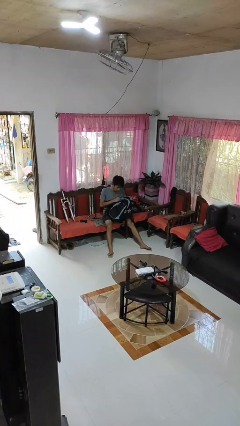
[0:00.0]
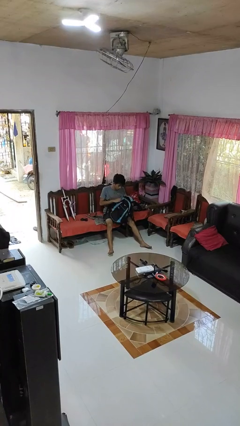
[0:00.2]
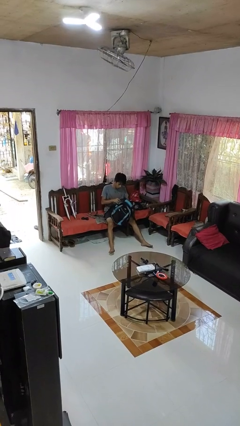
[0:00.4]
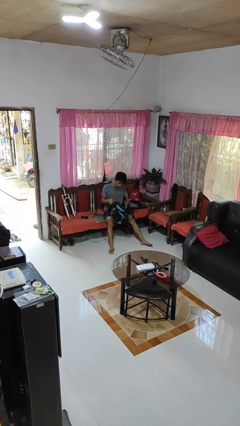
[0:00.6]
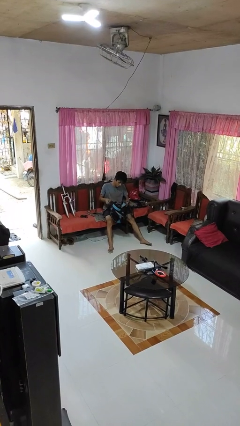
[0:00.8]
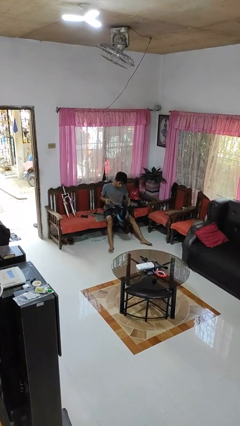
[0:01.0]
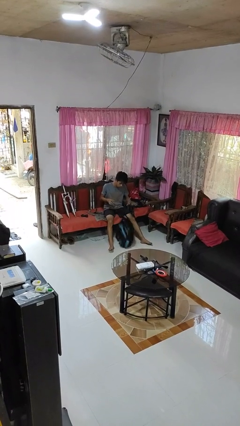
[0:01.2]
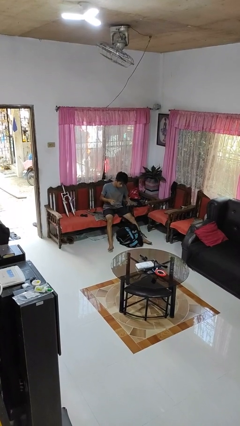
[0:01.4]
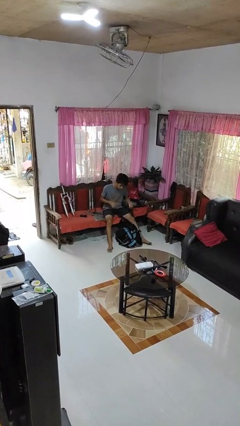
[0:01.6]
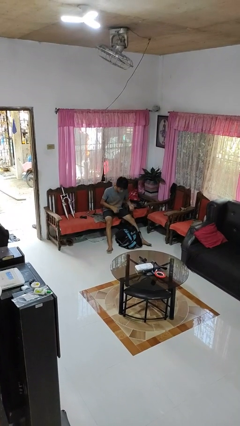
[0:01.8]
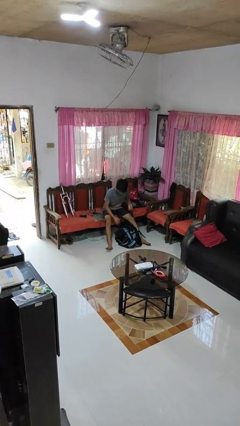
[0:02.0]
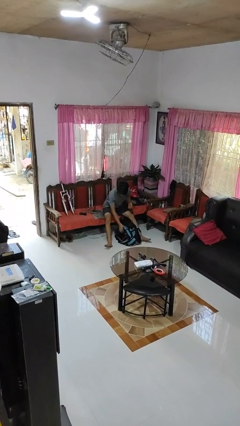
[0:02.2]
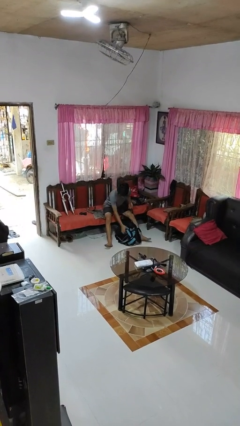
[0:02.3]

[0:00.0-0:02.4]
person drops object

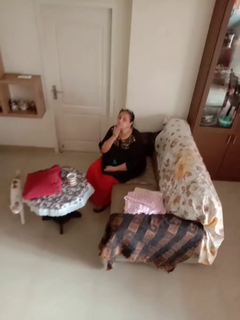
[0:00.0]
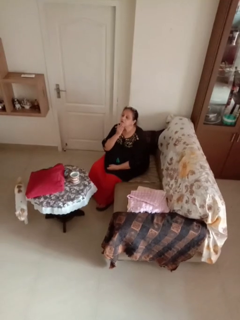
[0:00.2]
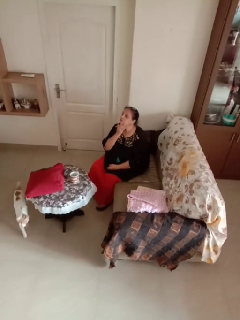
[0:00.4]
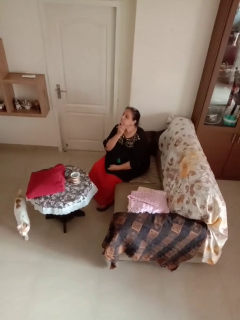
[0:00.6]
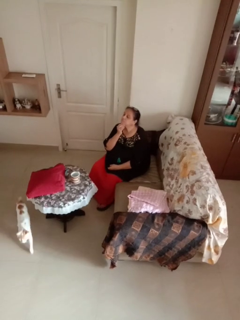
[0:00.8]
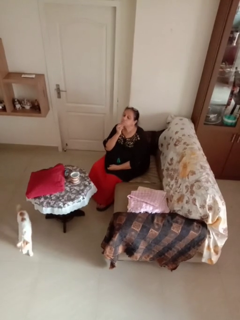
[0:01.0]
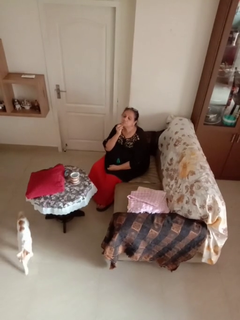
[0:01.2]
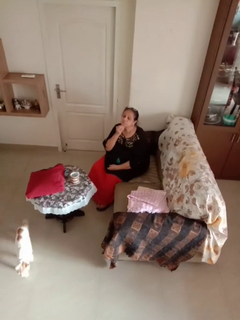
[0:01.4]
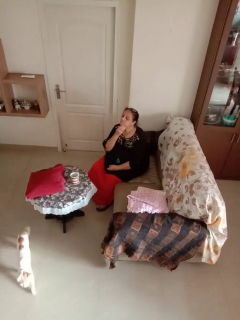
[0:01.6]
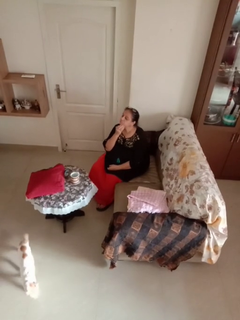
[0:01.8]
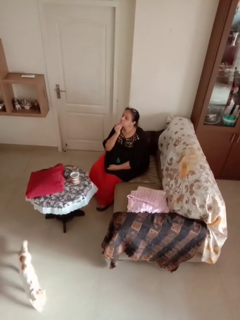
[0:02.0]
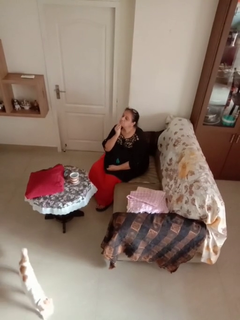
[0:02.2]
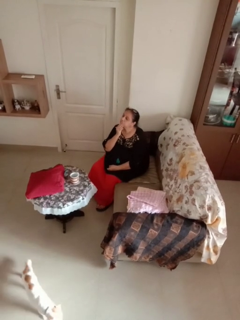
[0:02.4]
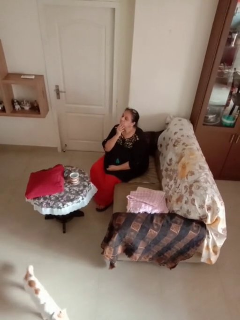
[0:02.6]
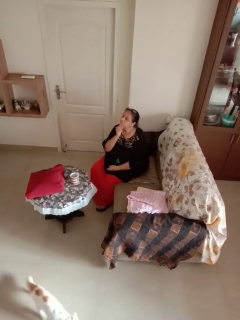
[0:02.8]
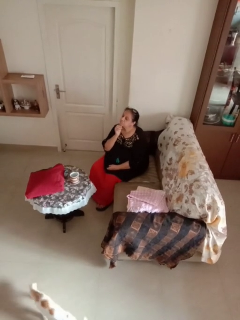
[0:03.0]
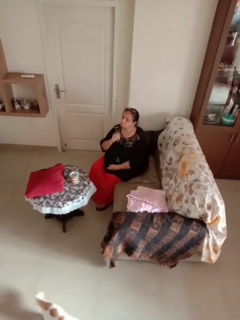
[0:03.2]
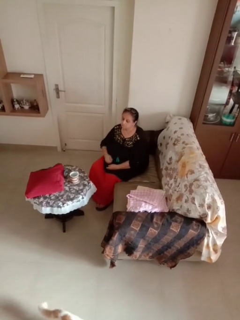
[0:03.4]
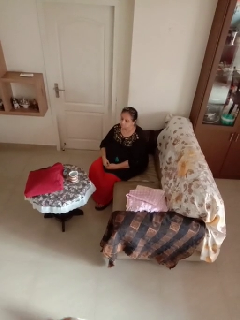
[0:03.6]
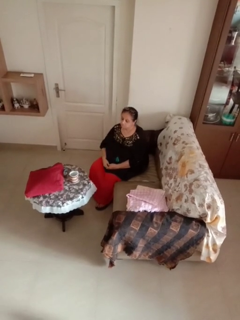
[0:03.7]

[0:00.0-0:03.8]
person strokes chin

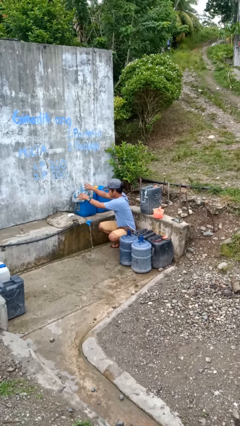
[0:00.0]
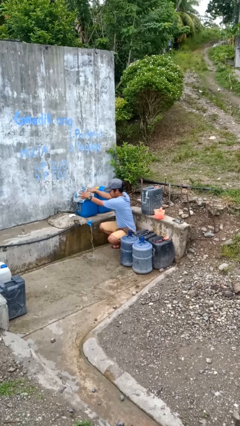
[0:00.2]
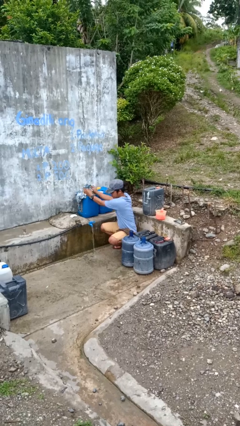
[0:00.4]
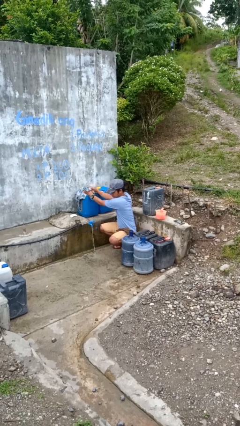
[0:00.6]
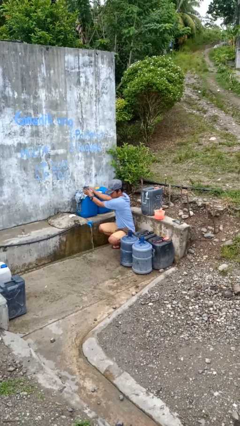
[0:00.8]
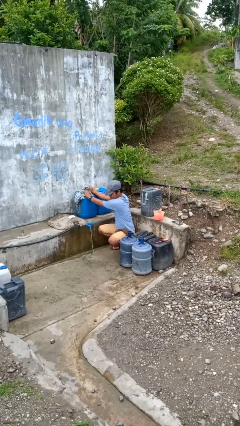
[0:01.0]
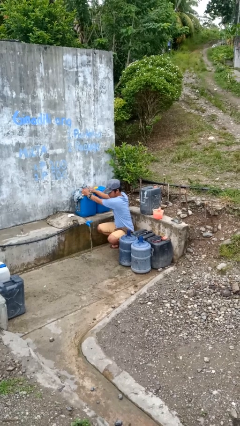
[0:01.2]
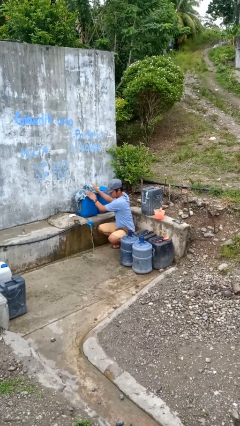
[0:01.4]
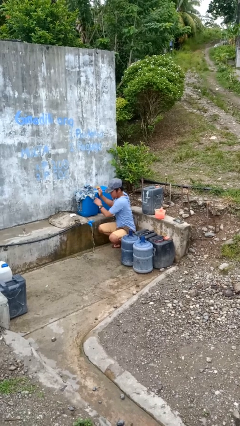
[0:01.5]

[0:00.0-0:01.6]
person dries hands with towel

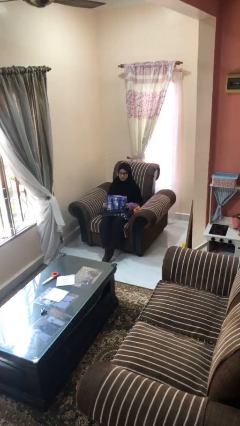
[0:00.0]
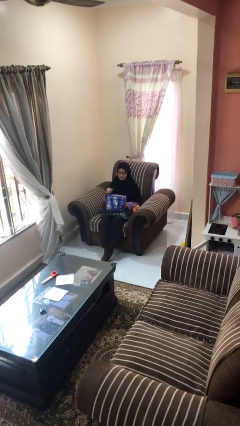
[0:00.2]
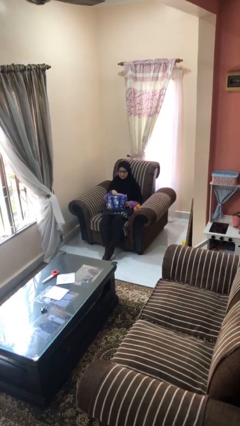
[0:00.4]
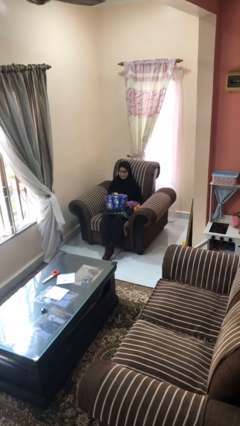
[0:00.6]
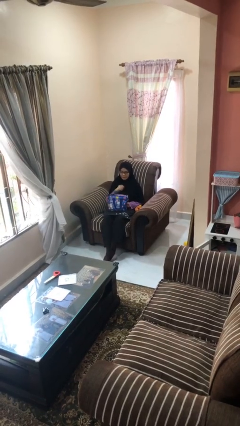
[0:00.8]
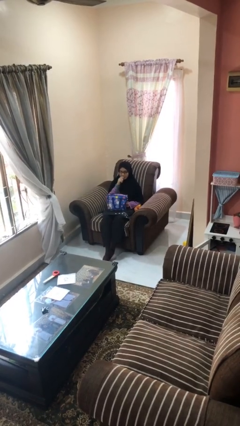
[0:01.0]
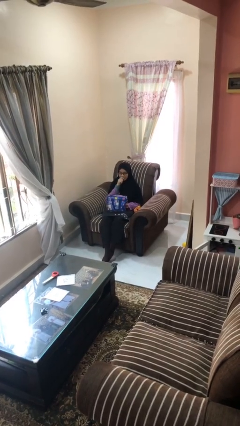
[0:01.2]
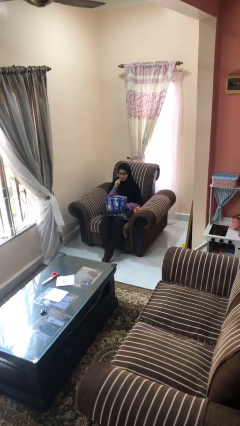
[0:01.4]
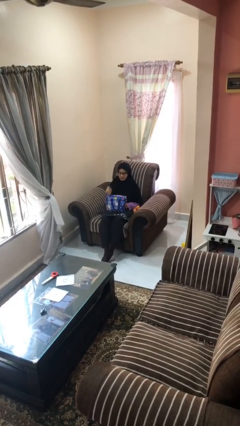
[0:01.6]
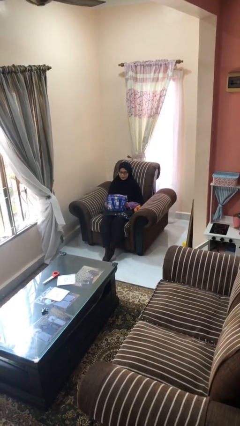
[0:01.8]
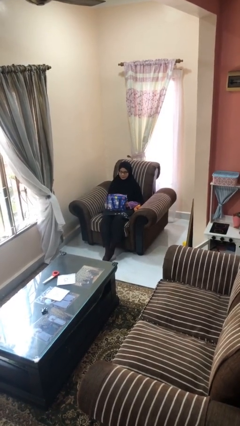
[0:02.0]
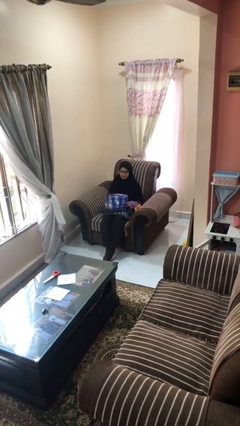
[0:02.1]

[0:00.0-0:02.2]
person eats snack from bag

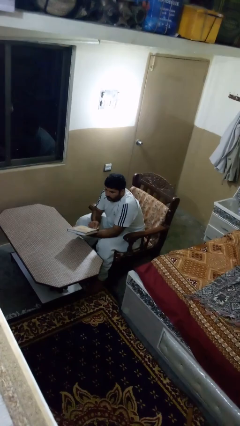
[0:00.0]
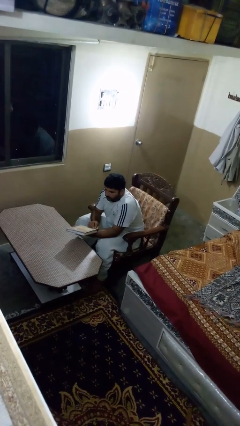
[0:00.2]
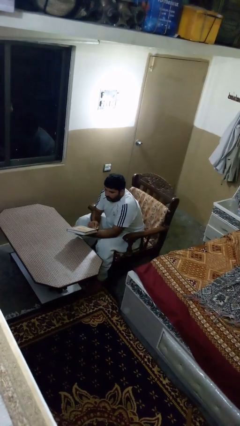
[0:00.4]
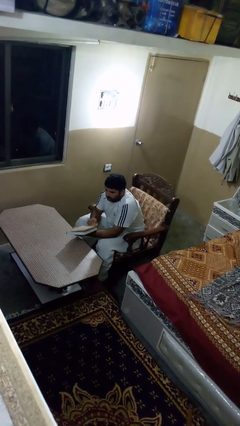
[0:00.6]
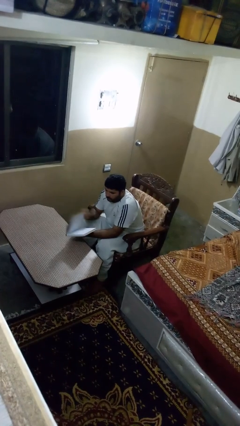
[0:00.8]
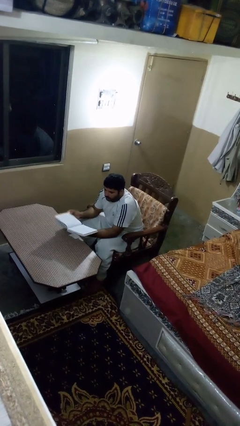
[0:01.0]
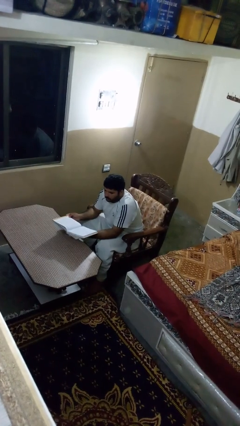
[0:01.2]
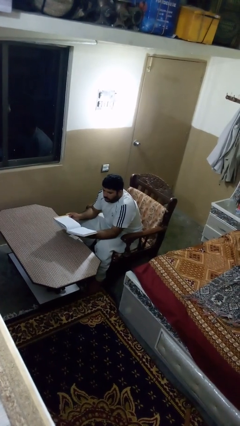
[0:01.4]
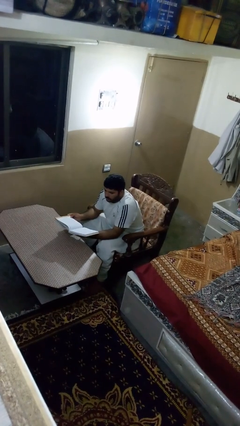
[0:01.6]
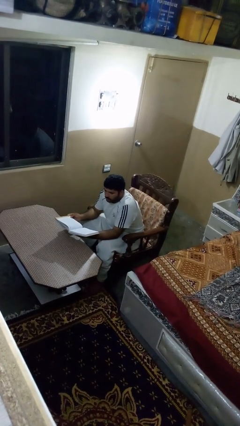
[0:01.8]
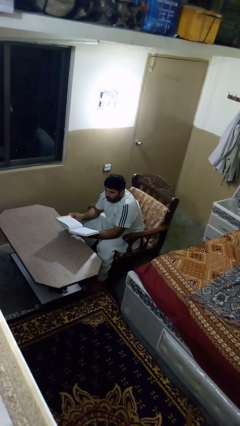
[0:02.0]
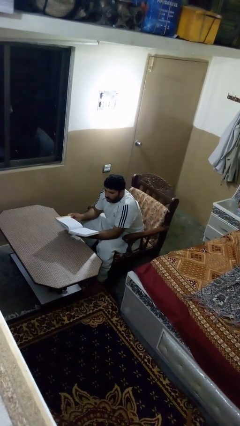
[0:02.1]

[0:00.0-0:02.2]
person reads book

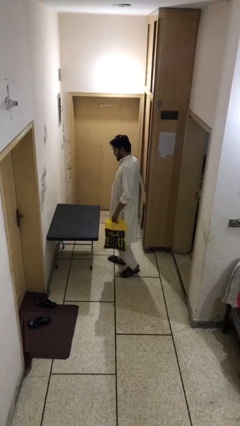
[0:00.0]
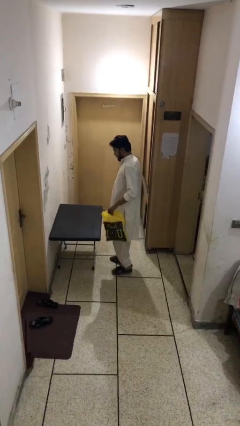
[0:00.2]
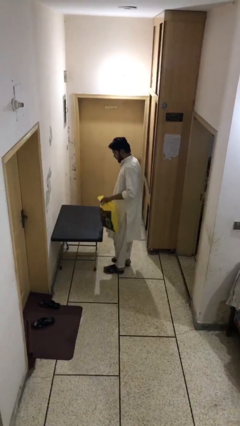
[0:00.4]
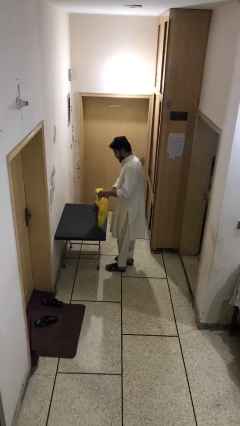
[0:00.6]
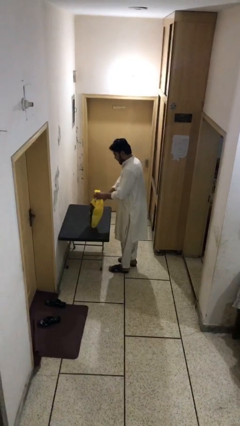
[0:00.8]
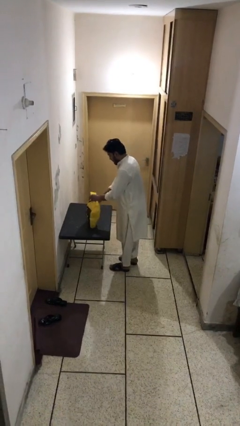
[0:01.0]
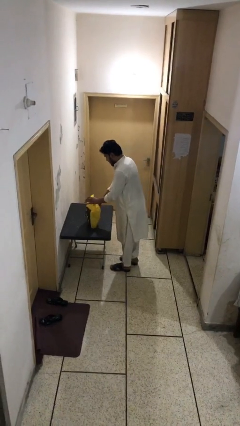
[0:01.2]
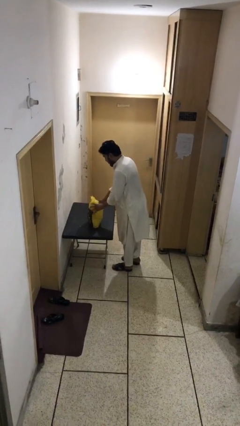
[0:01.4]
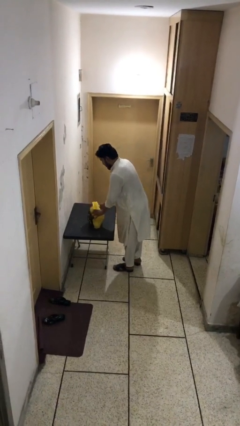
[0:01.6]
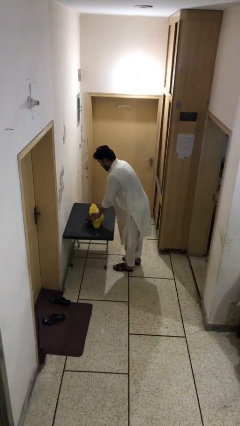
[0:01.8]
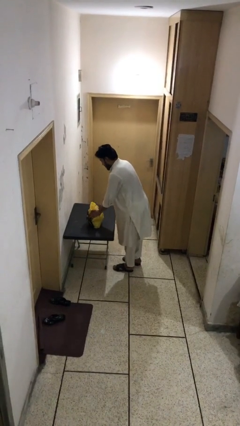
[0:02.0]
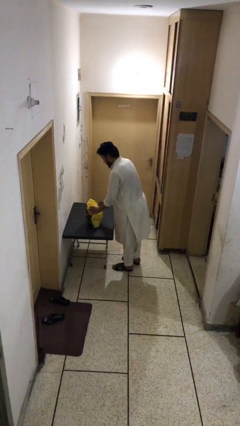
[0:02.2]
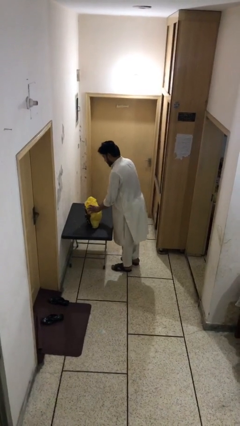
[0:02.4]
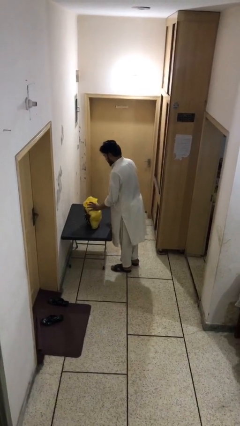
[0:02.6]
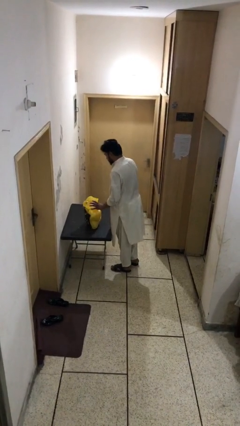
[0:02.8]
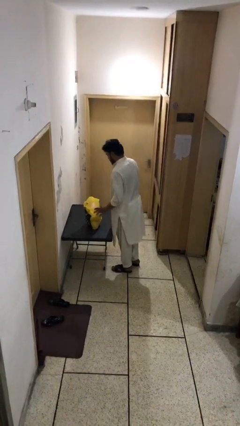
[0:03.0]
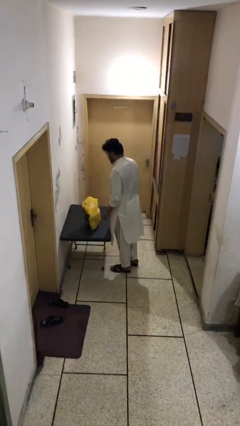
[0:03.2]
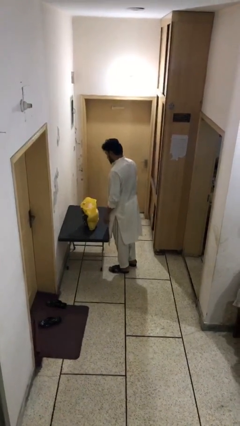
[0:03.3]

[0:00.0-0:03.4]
person puts down object on table

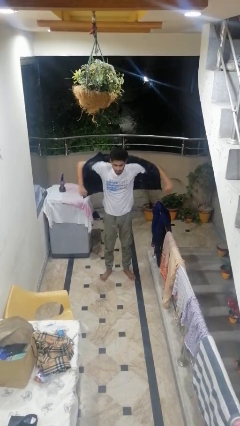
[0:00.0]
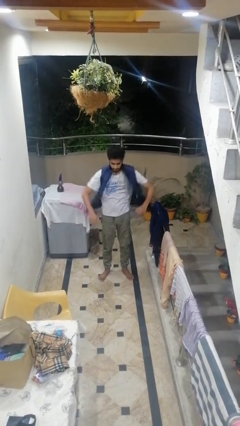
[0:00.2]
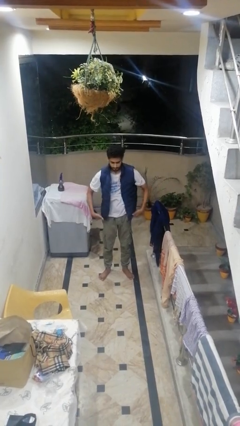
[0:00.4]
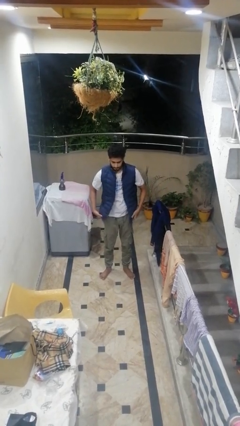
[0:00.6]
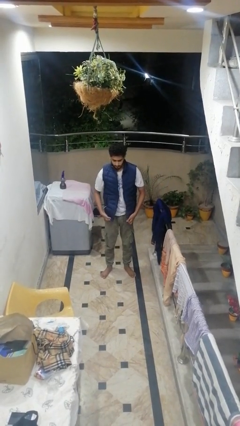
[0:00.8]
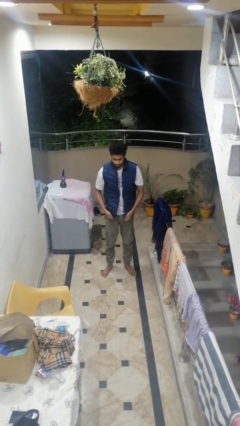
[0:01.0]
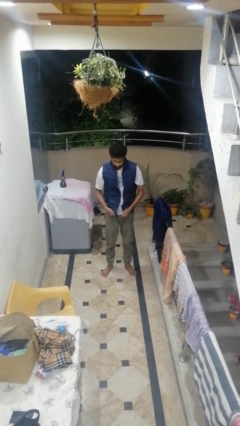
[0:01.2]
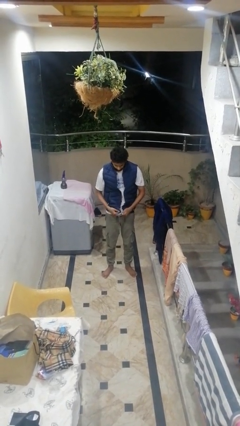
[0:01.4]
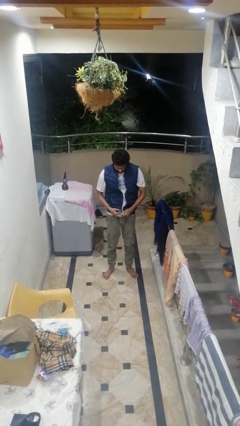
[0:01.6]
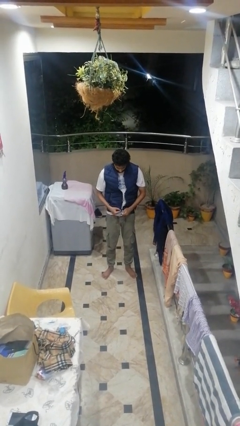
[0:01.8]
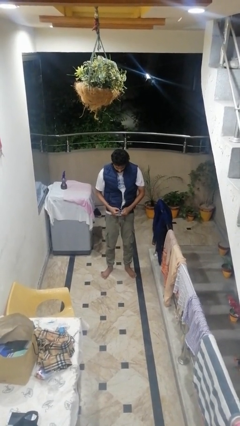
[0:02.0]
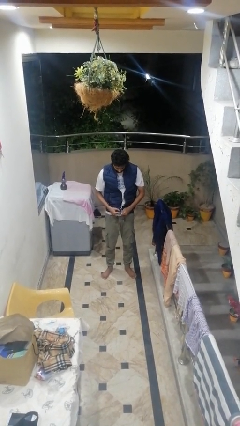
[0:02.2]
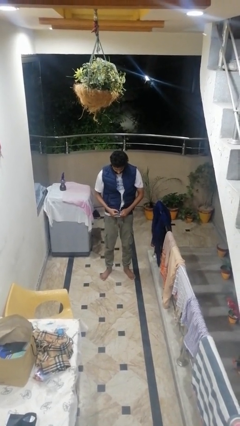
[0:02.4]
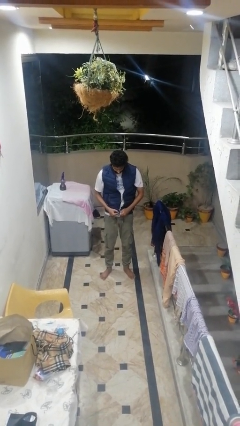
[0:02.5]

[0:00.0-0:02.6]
person puts on jacket
